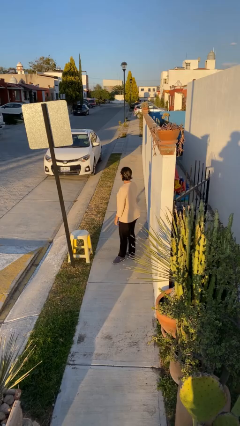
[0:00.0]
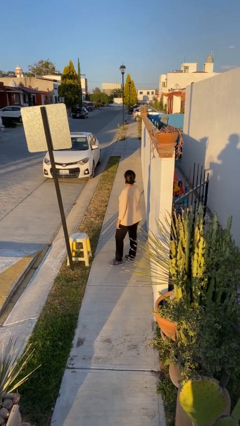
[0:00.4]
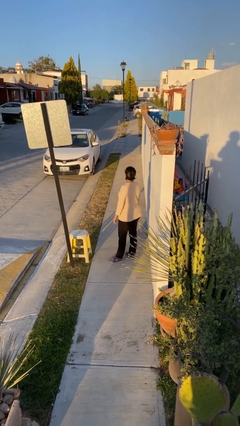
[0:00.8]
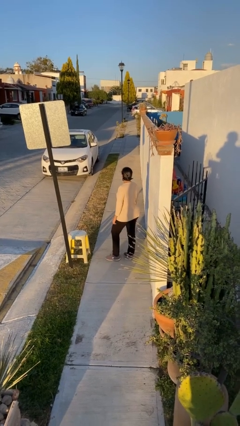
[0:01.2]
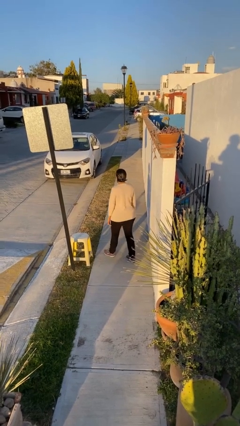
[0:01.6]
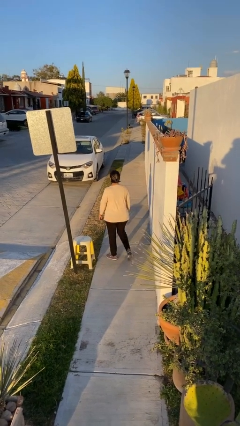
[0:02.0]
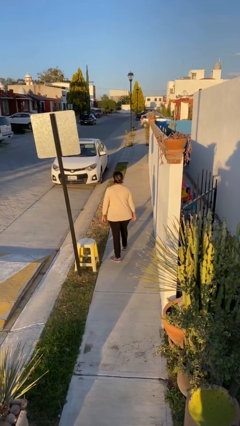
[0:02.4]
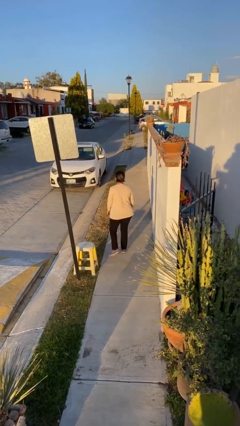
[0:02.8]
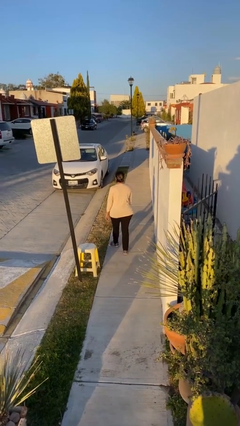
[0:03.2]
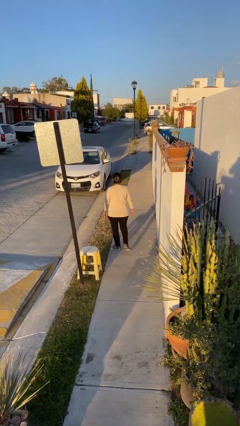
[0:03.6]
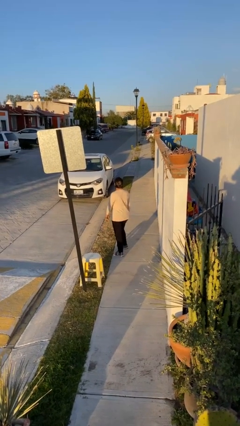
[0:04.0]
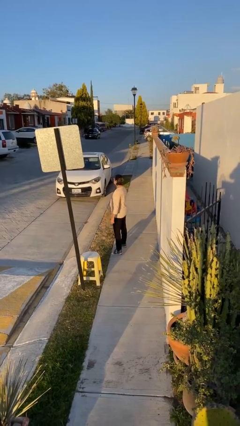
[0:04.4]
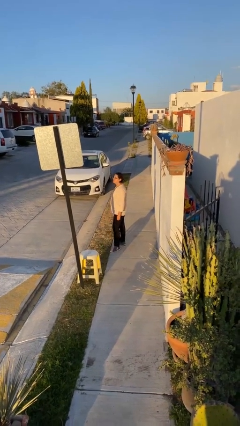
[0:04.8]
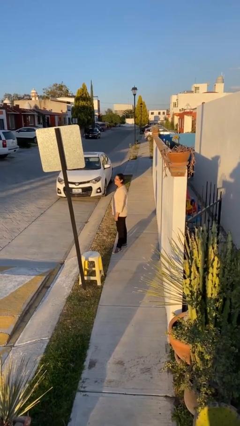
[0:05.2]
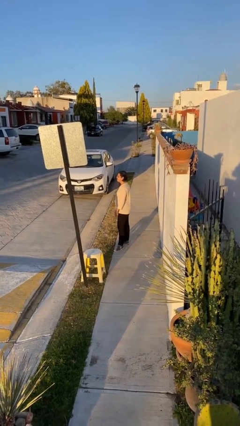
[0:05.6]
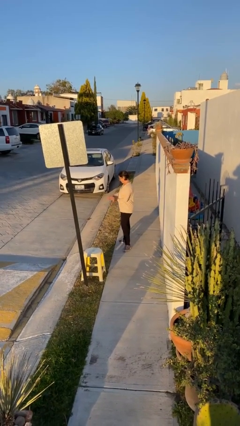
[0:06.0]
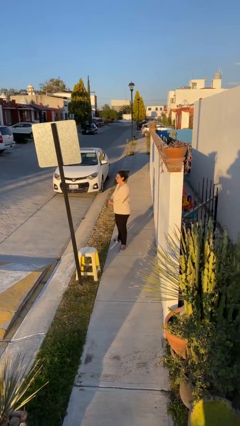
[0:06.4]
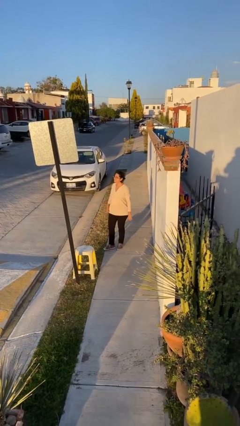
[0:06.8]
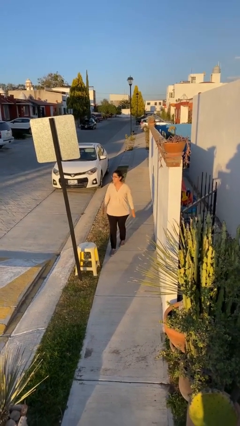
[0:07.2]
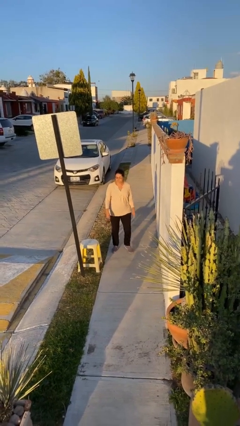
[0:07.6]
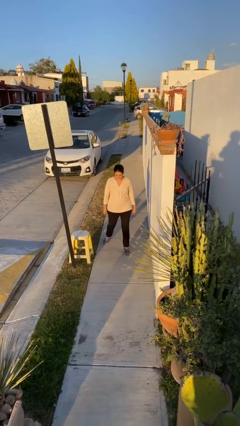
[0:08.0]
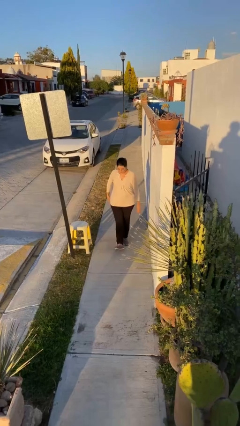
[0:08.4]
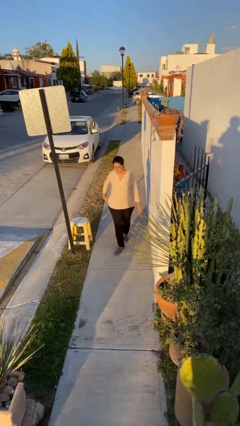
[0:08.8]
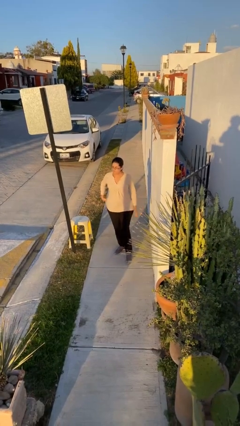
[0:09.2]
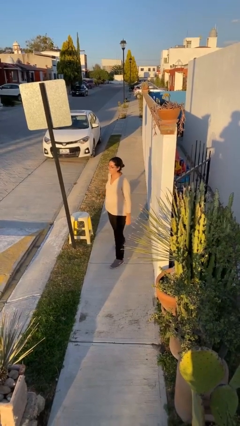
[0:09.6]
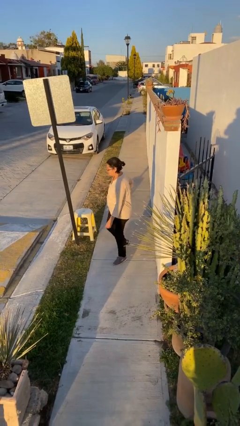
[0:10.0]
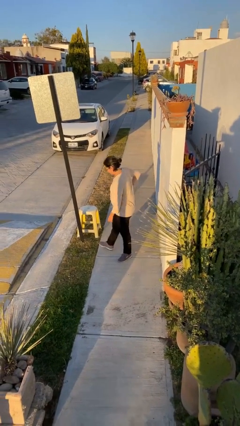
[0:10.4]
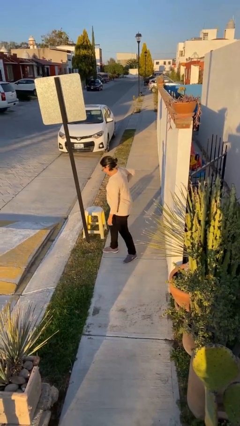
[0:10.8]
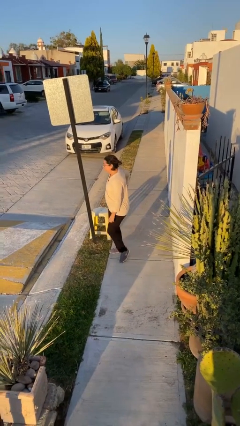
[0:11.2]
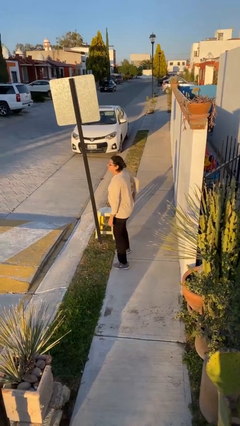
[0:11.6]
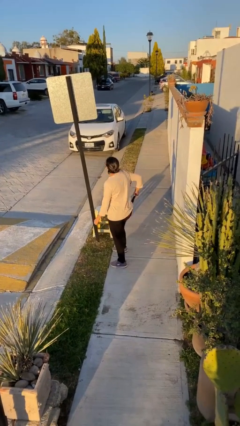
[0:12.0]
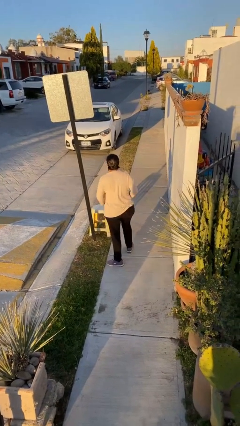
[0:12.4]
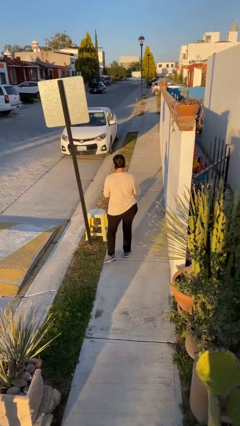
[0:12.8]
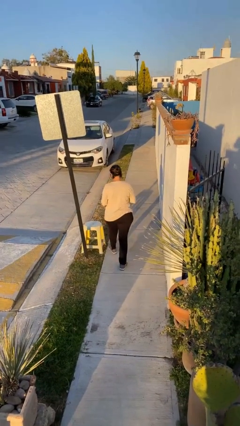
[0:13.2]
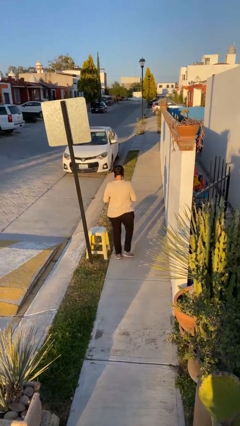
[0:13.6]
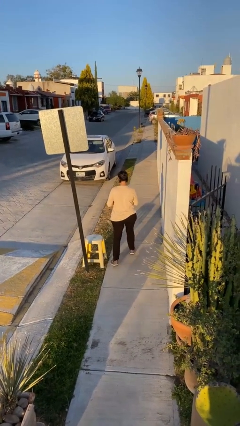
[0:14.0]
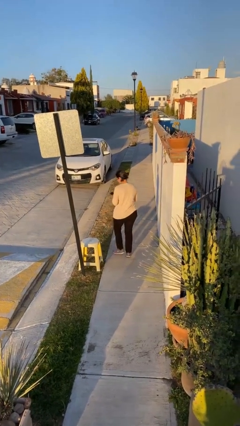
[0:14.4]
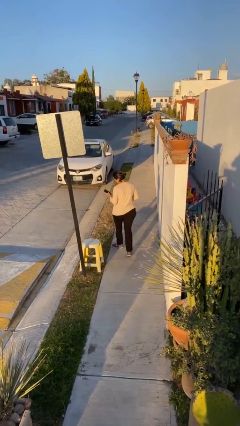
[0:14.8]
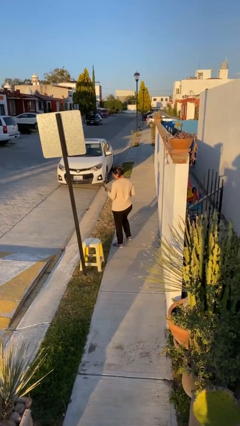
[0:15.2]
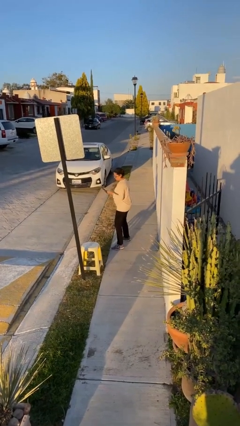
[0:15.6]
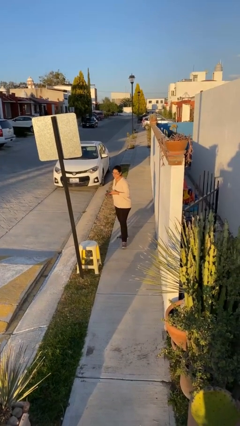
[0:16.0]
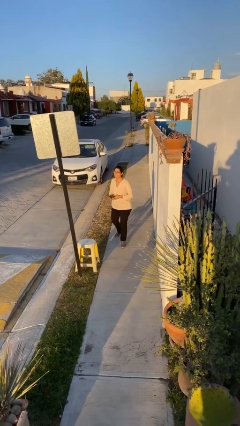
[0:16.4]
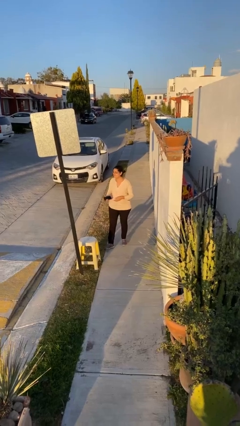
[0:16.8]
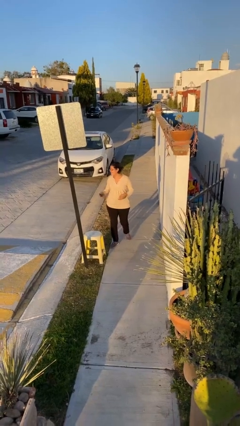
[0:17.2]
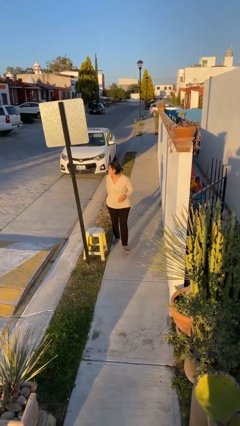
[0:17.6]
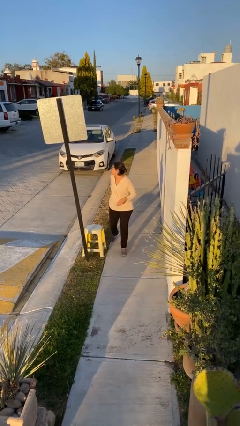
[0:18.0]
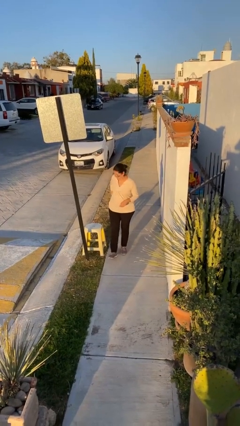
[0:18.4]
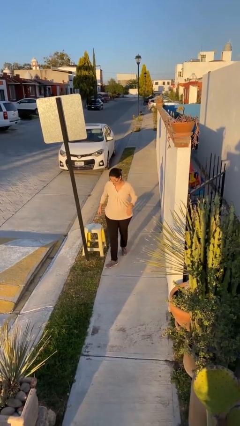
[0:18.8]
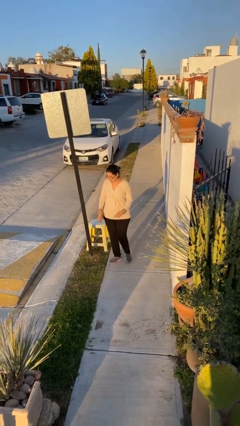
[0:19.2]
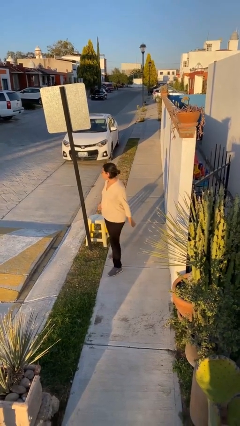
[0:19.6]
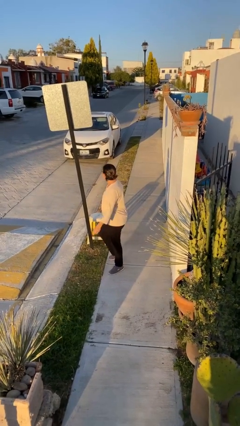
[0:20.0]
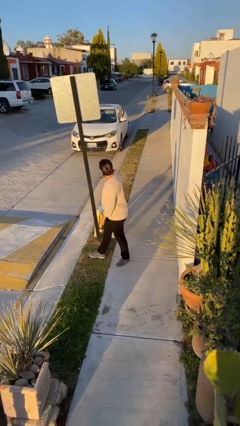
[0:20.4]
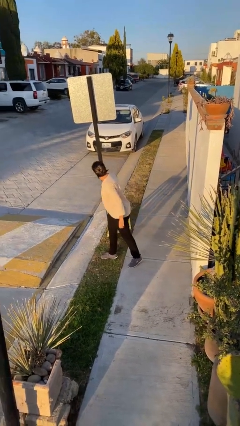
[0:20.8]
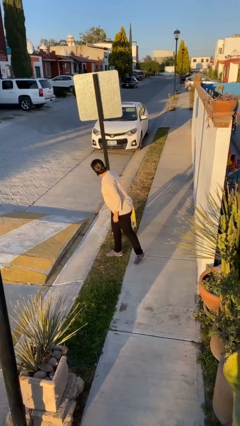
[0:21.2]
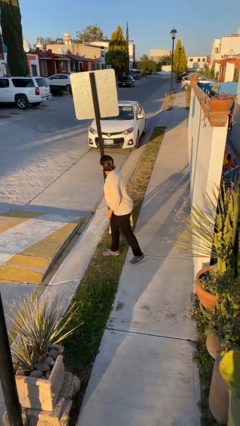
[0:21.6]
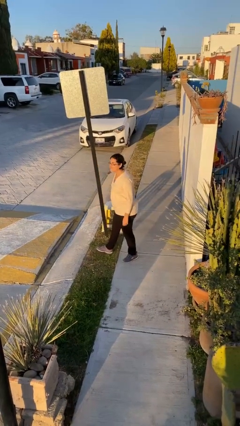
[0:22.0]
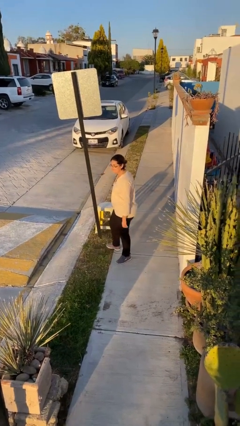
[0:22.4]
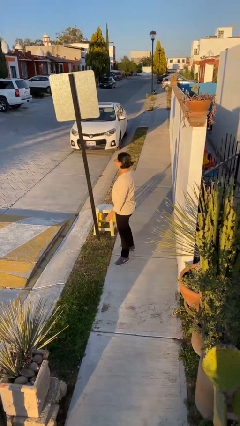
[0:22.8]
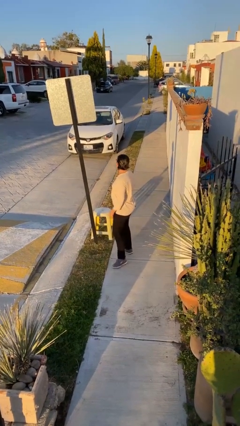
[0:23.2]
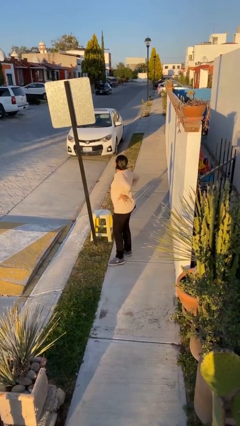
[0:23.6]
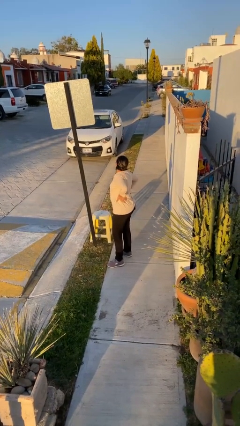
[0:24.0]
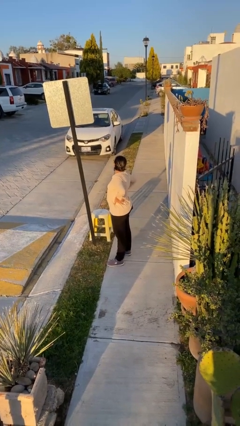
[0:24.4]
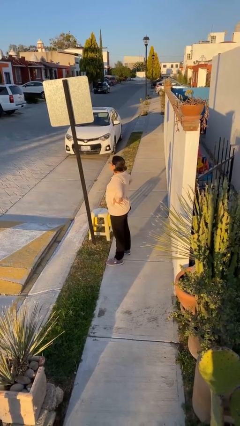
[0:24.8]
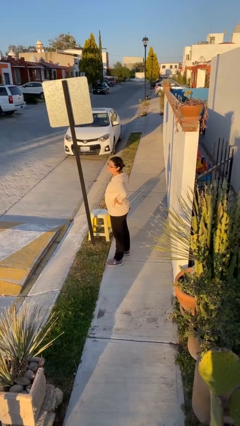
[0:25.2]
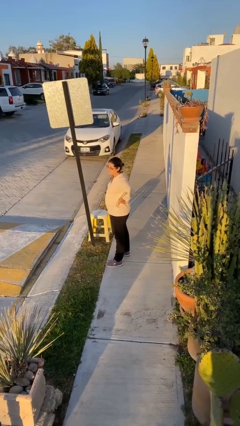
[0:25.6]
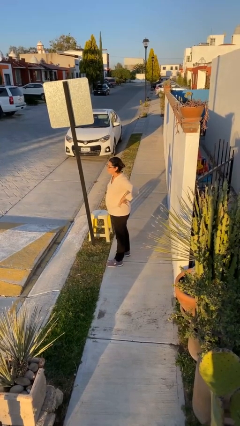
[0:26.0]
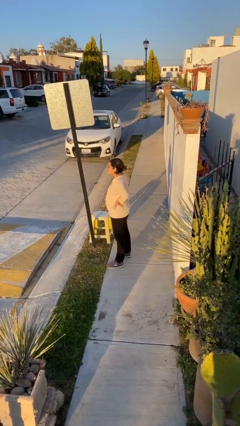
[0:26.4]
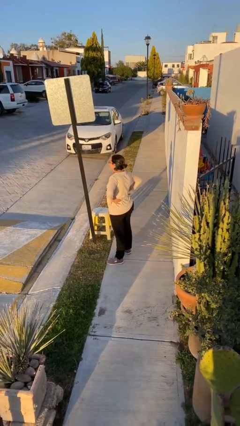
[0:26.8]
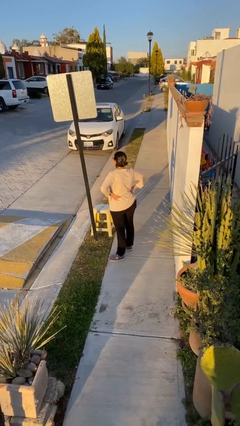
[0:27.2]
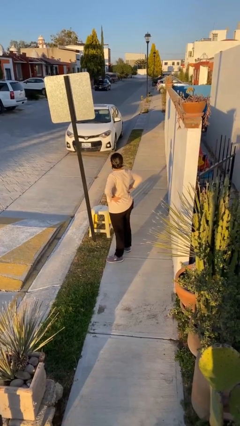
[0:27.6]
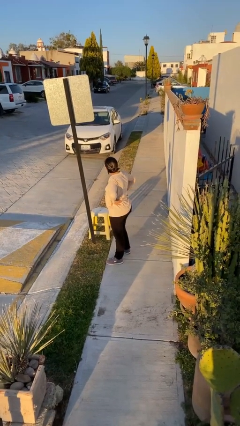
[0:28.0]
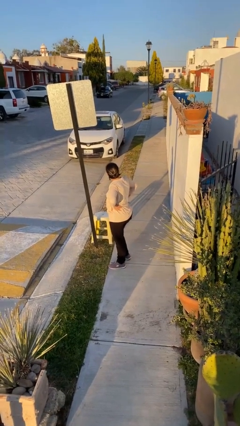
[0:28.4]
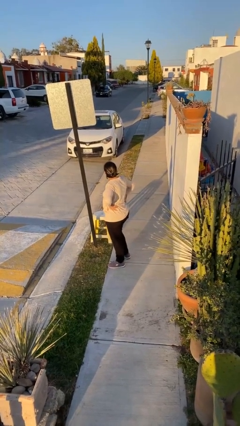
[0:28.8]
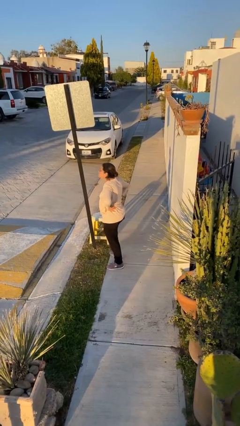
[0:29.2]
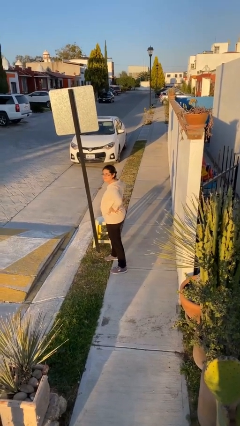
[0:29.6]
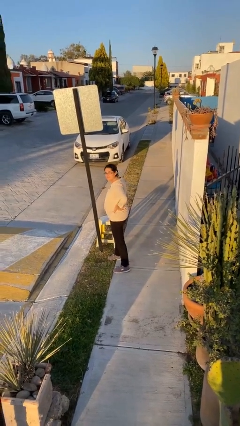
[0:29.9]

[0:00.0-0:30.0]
person walks

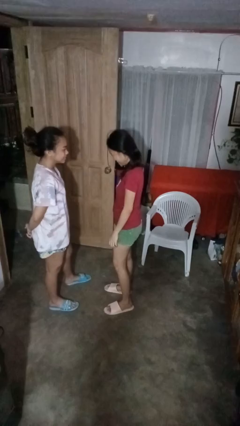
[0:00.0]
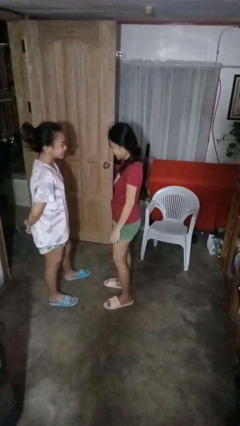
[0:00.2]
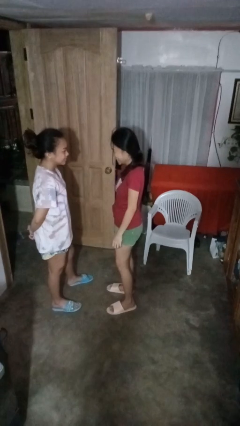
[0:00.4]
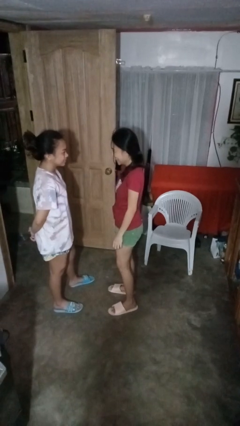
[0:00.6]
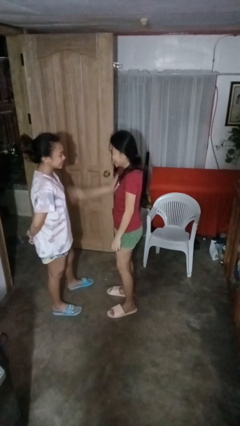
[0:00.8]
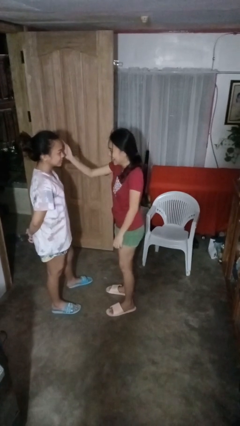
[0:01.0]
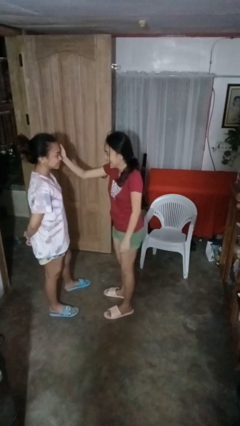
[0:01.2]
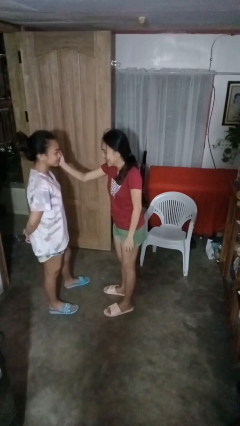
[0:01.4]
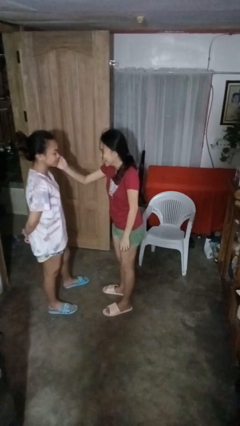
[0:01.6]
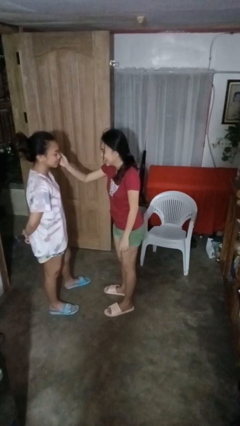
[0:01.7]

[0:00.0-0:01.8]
person touches face of person

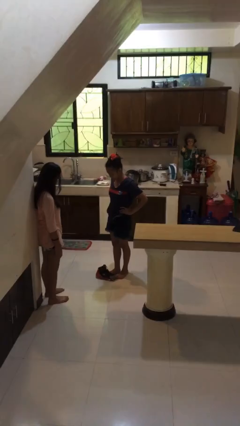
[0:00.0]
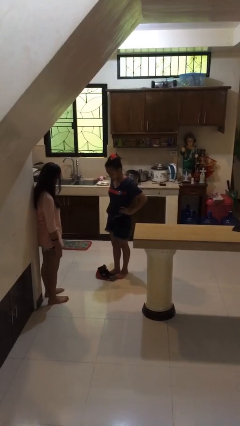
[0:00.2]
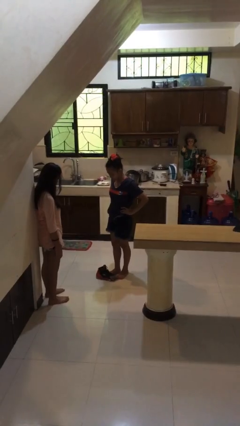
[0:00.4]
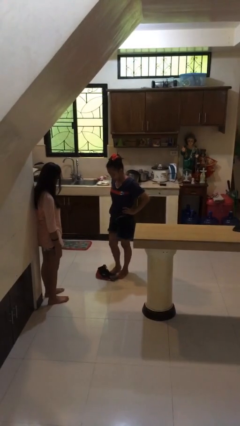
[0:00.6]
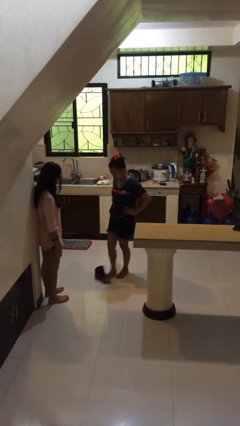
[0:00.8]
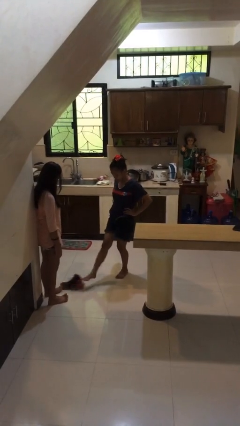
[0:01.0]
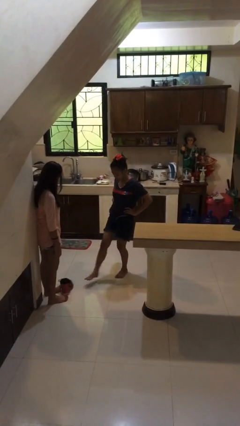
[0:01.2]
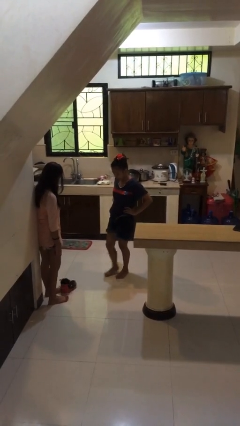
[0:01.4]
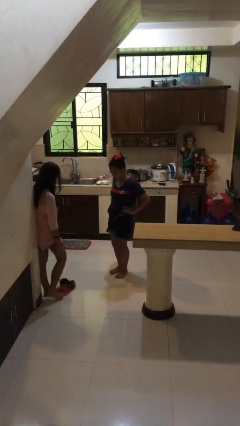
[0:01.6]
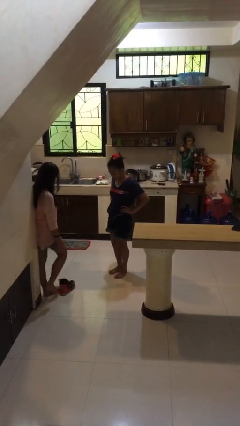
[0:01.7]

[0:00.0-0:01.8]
person kicks object to person
